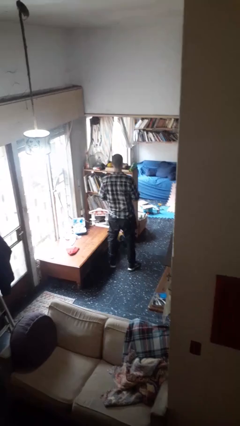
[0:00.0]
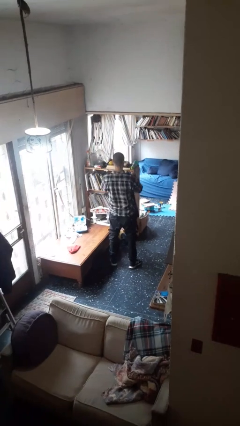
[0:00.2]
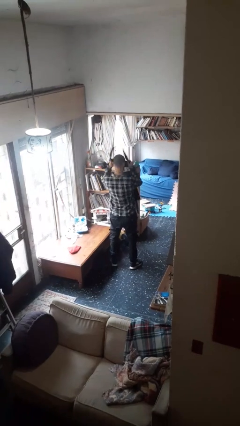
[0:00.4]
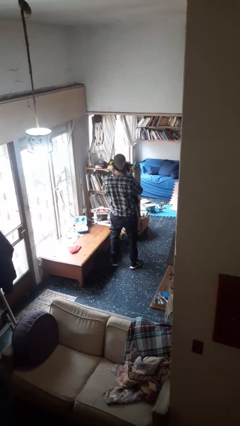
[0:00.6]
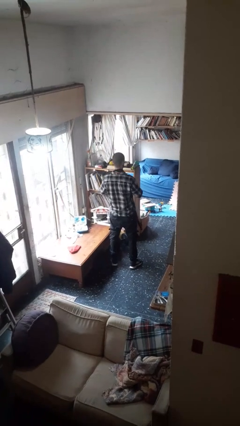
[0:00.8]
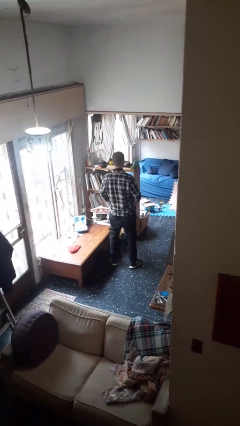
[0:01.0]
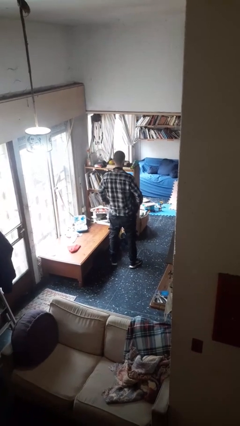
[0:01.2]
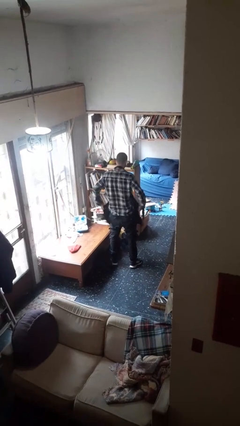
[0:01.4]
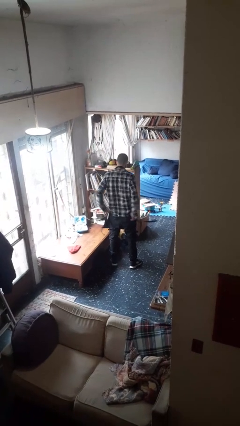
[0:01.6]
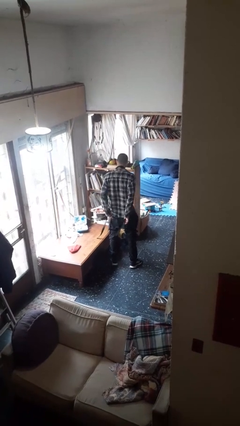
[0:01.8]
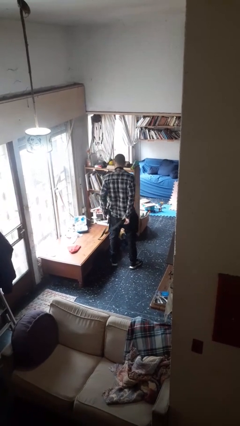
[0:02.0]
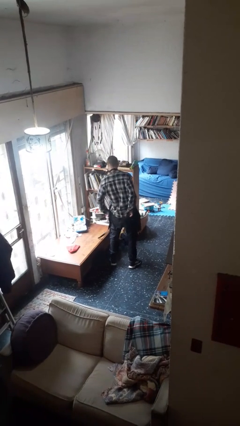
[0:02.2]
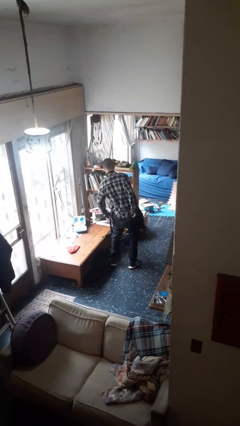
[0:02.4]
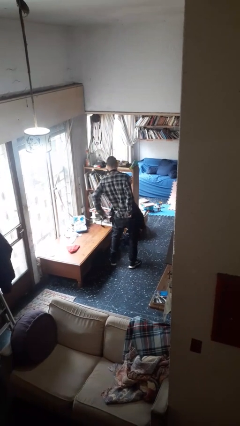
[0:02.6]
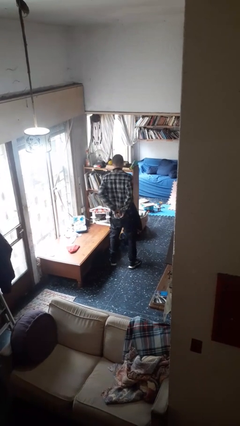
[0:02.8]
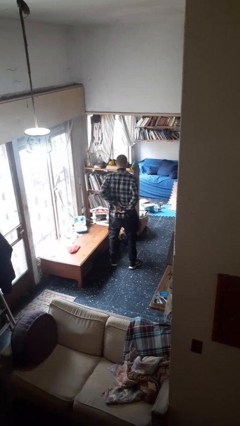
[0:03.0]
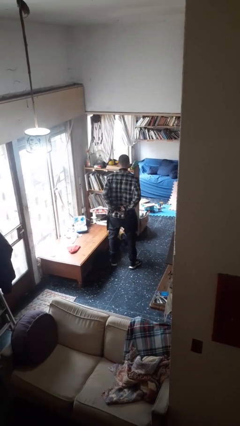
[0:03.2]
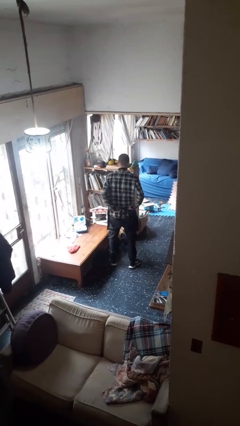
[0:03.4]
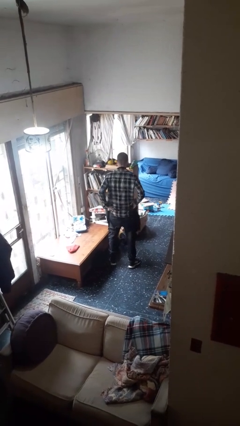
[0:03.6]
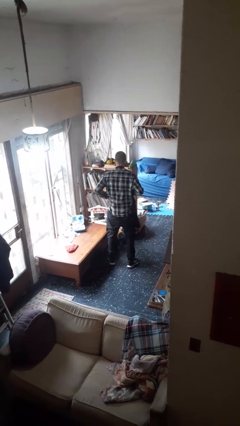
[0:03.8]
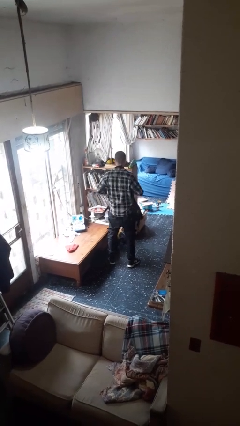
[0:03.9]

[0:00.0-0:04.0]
person puts on apron

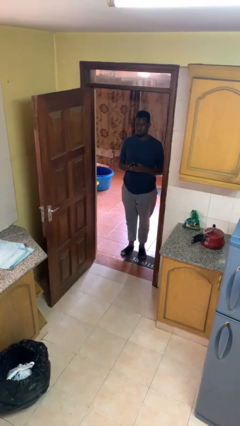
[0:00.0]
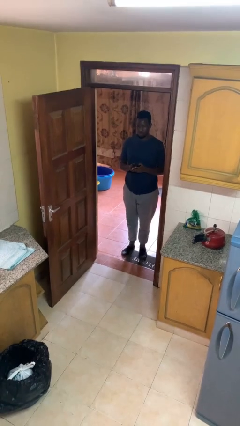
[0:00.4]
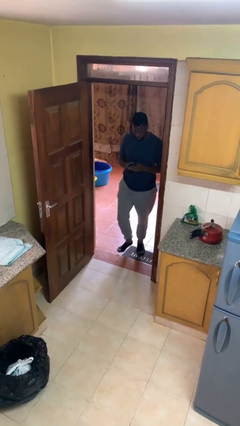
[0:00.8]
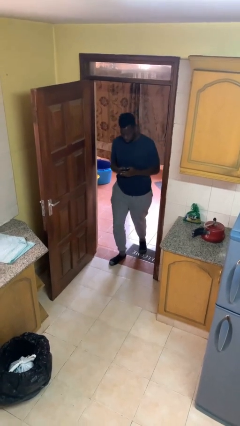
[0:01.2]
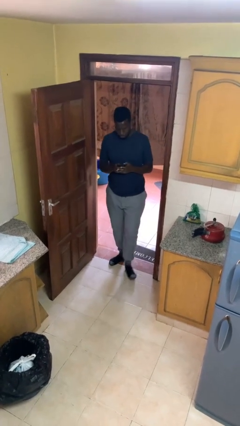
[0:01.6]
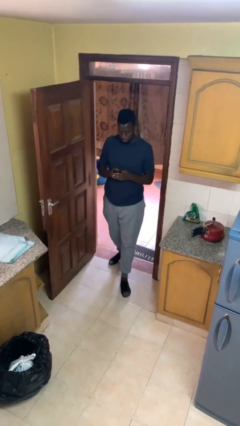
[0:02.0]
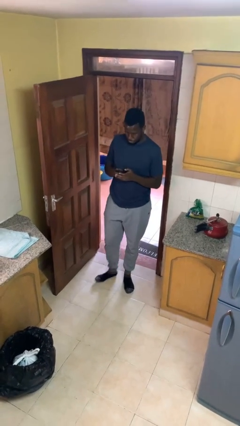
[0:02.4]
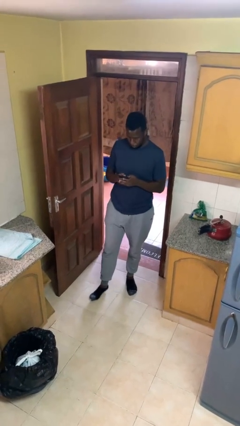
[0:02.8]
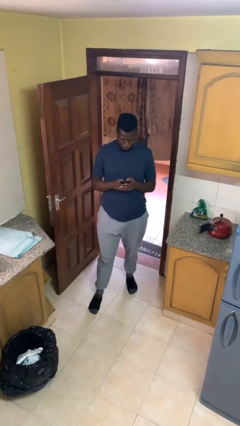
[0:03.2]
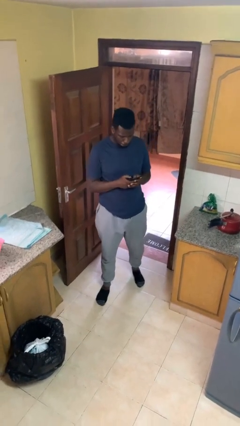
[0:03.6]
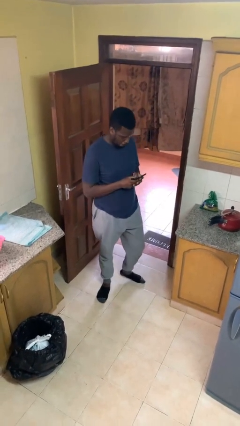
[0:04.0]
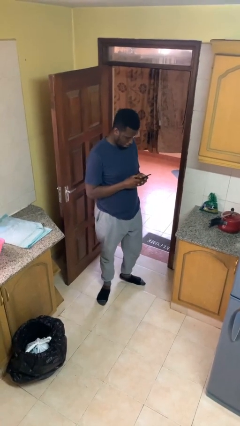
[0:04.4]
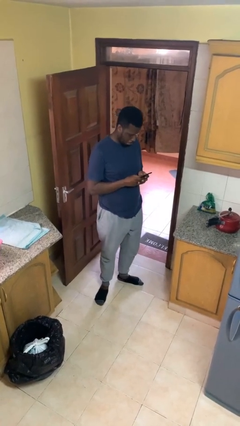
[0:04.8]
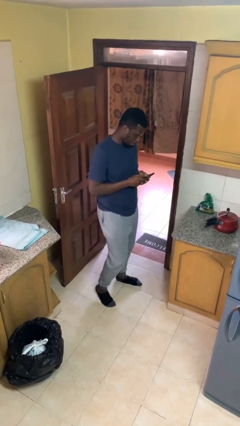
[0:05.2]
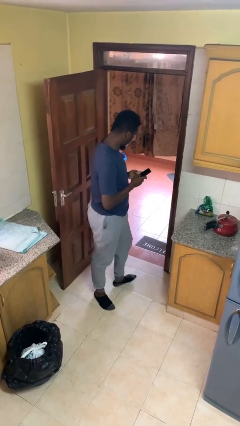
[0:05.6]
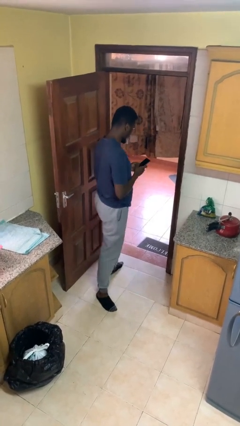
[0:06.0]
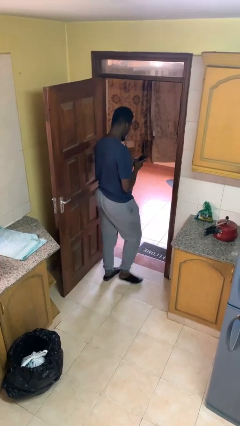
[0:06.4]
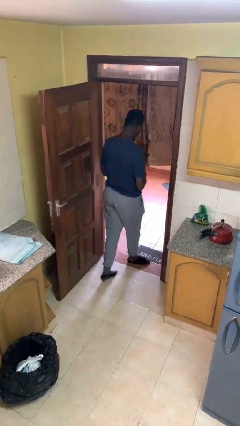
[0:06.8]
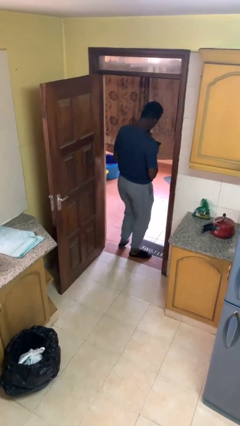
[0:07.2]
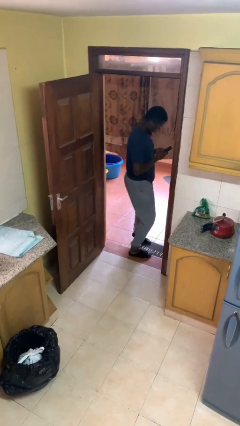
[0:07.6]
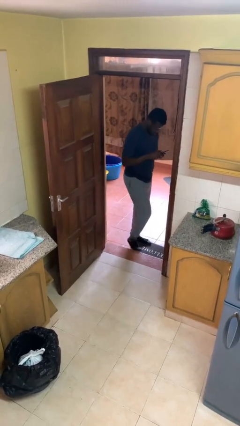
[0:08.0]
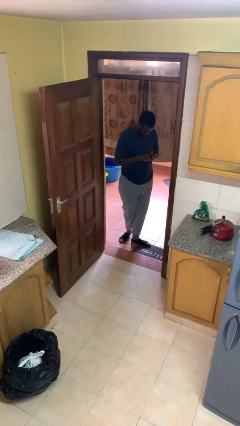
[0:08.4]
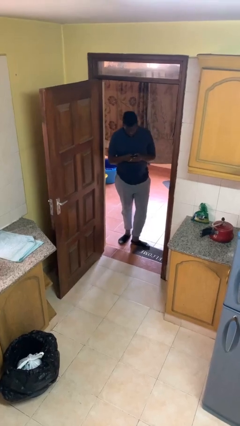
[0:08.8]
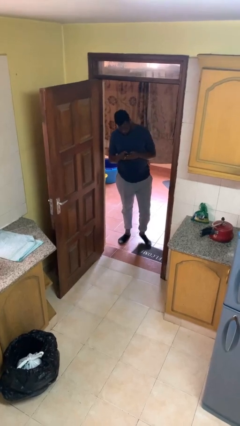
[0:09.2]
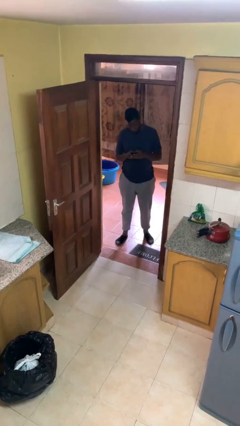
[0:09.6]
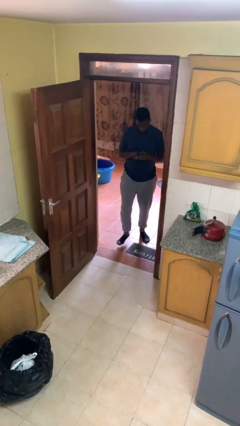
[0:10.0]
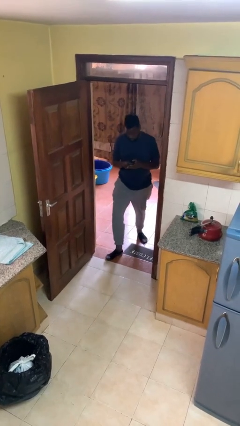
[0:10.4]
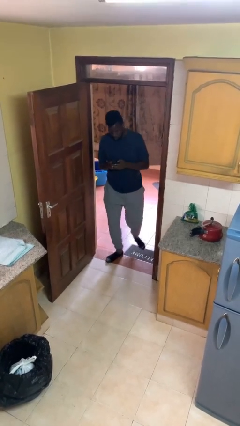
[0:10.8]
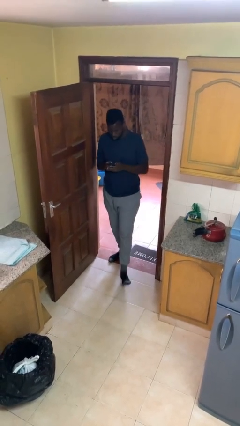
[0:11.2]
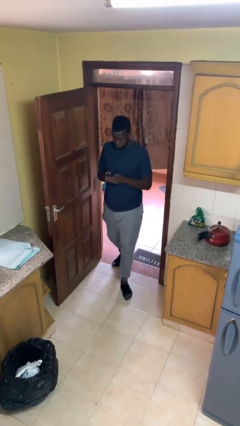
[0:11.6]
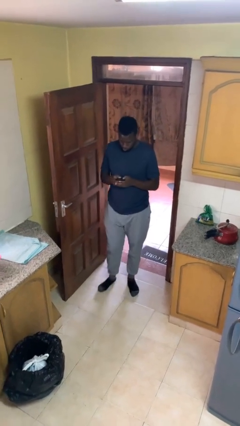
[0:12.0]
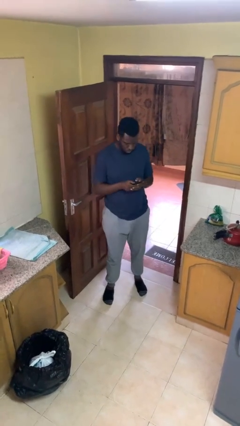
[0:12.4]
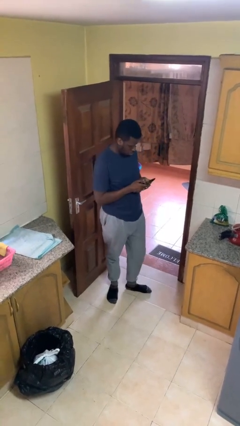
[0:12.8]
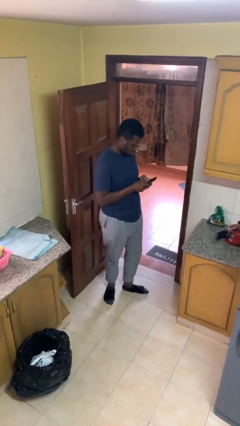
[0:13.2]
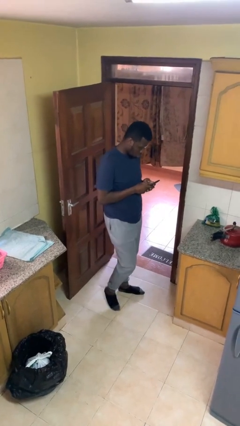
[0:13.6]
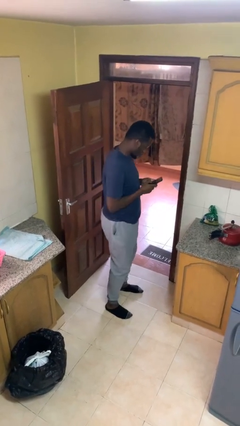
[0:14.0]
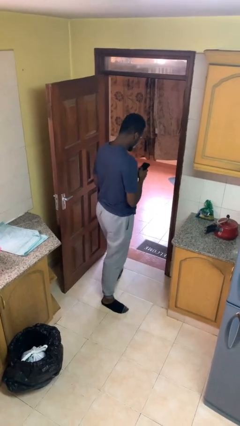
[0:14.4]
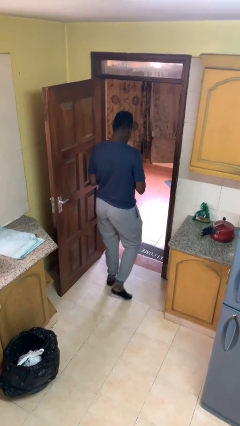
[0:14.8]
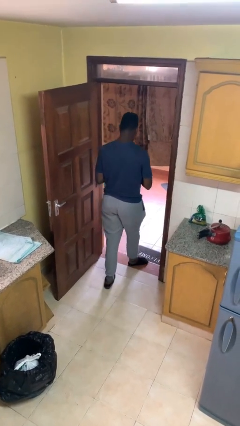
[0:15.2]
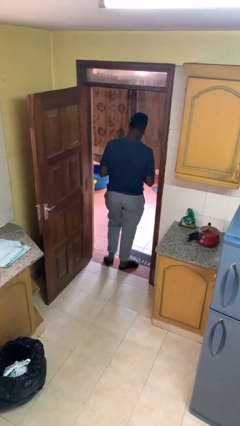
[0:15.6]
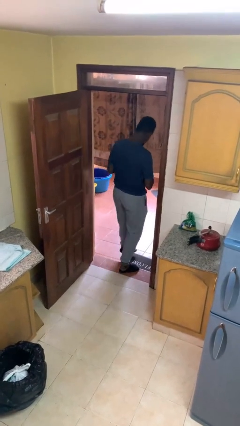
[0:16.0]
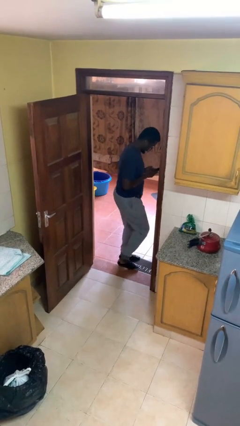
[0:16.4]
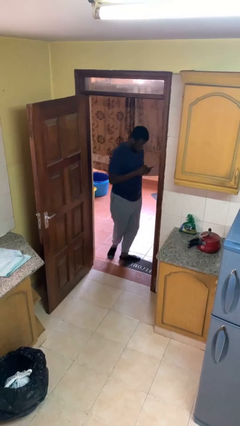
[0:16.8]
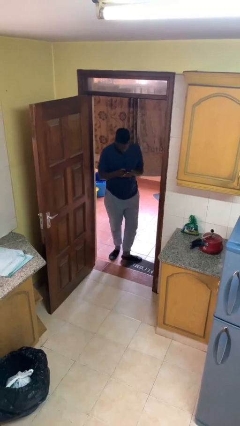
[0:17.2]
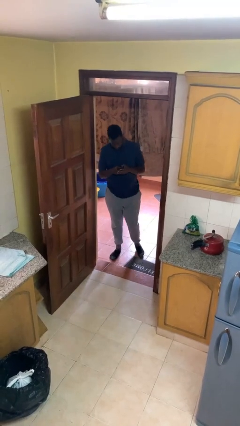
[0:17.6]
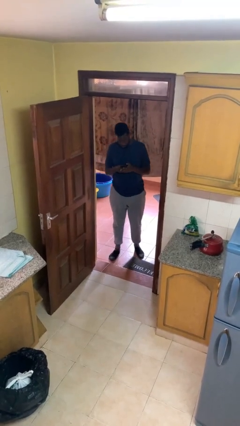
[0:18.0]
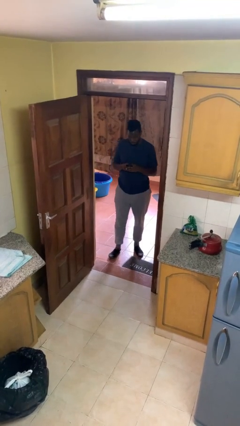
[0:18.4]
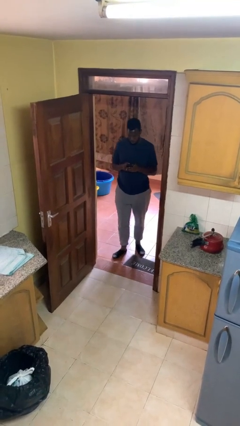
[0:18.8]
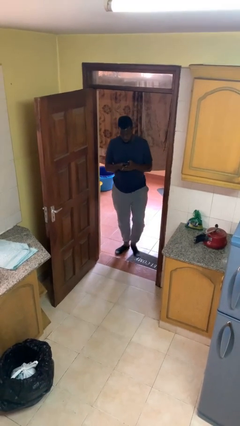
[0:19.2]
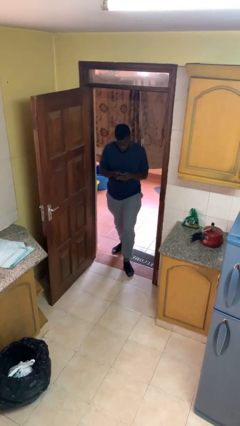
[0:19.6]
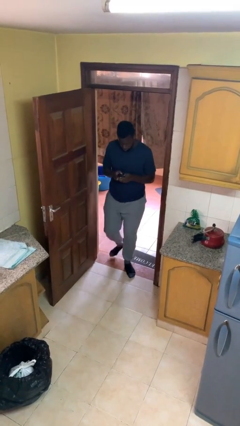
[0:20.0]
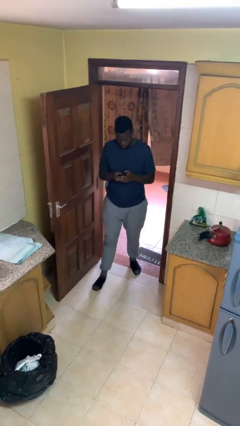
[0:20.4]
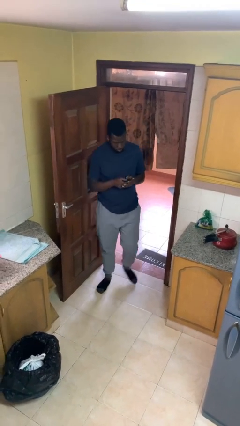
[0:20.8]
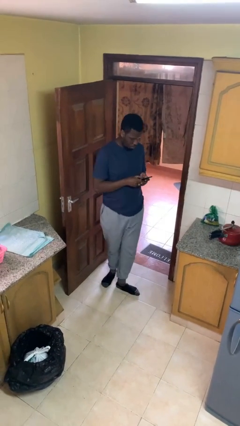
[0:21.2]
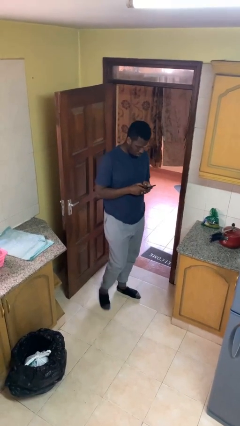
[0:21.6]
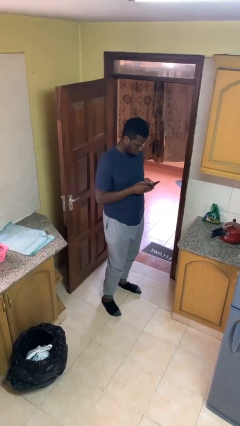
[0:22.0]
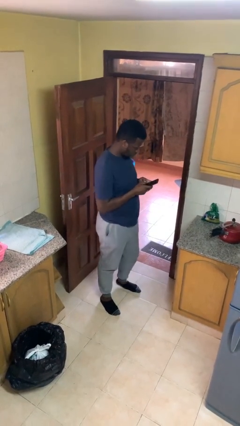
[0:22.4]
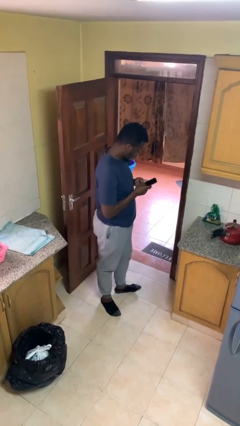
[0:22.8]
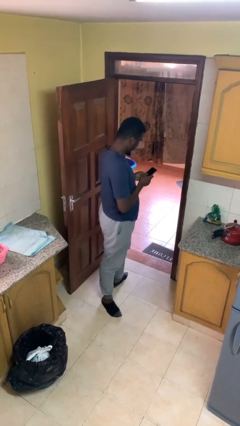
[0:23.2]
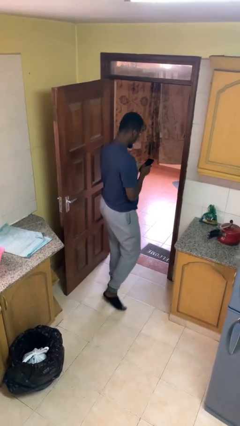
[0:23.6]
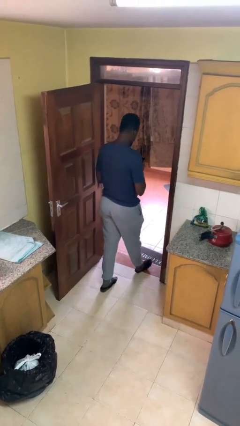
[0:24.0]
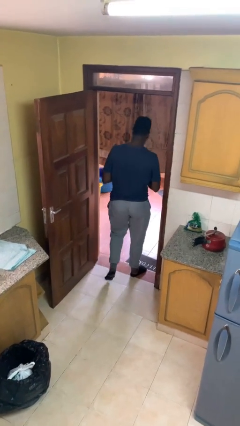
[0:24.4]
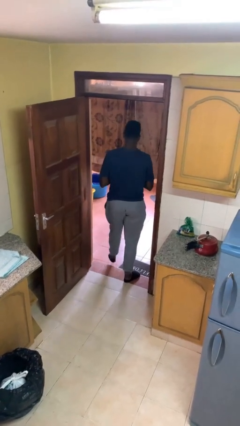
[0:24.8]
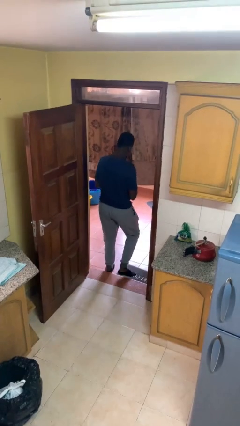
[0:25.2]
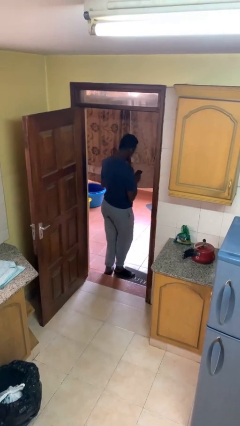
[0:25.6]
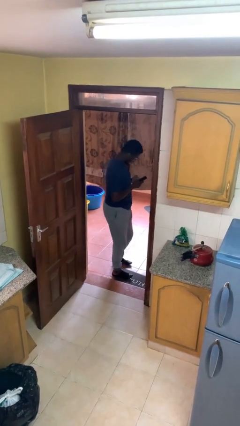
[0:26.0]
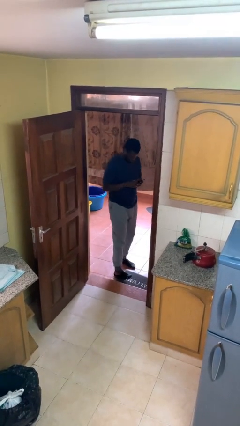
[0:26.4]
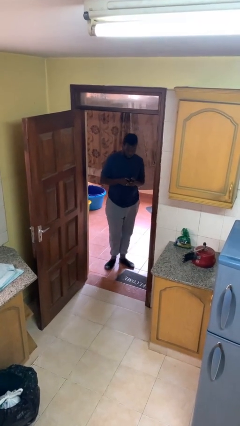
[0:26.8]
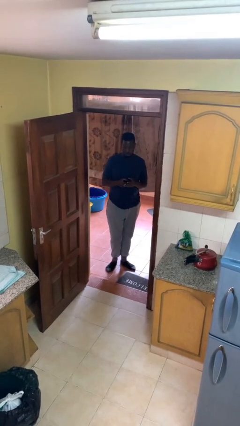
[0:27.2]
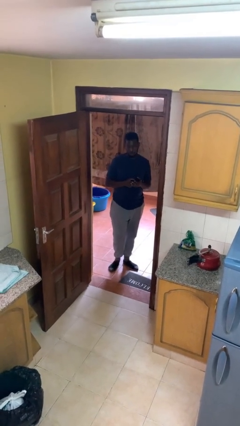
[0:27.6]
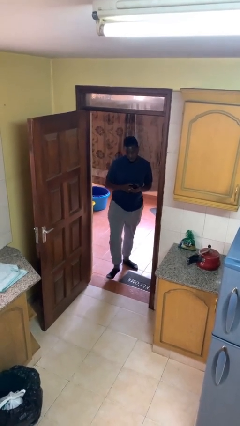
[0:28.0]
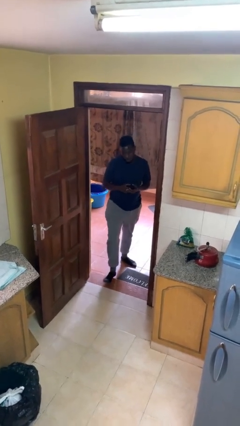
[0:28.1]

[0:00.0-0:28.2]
person texts on phone
